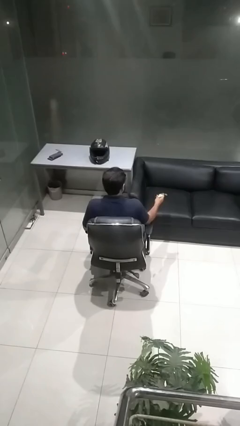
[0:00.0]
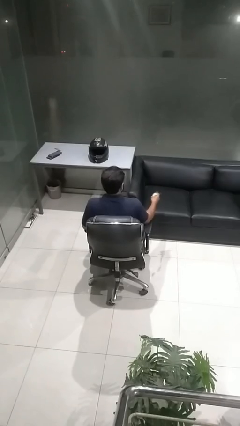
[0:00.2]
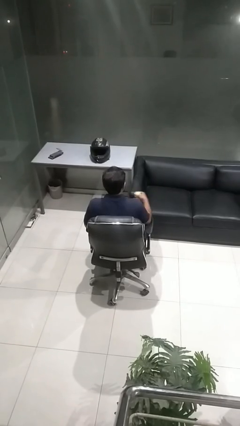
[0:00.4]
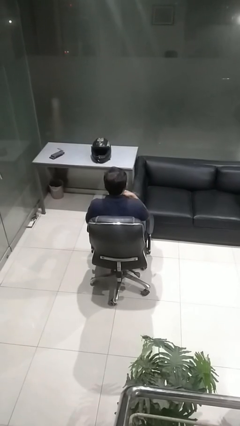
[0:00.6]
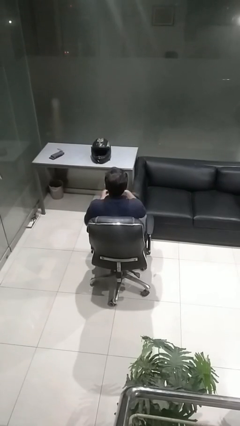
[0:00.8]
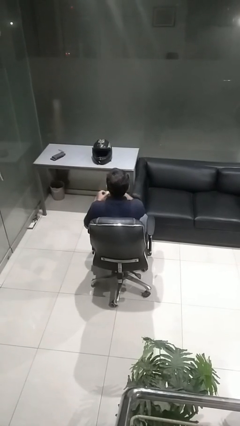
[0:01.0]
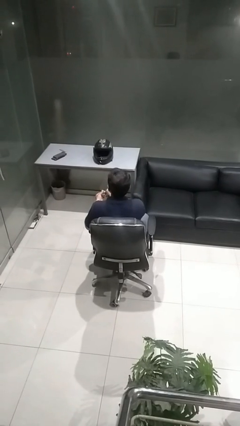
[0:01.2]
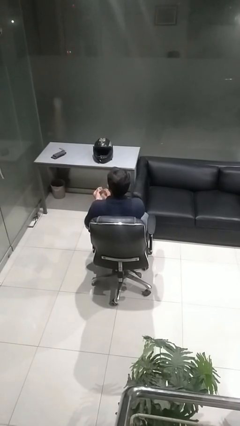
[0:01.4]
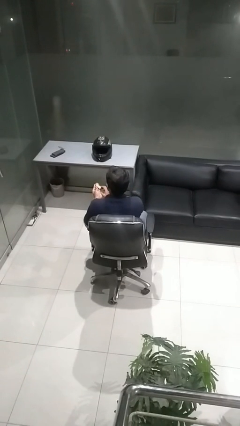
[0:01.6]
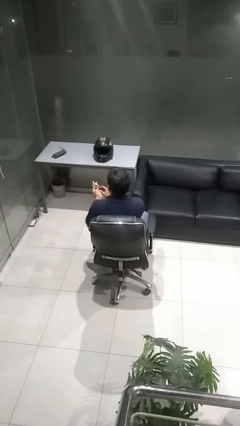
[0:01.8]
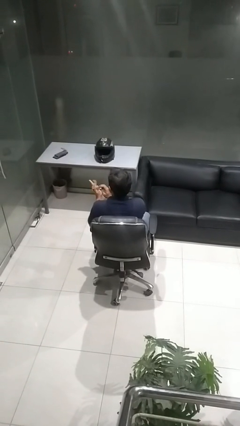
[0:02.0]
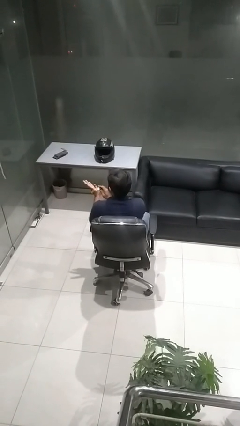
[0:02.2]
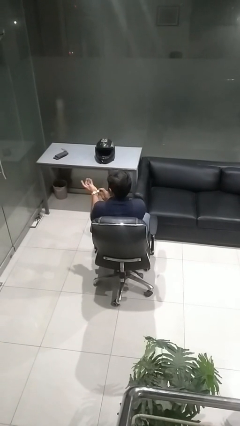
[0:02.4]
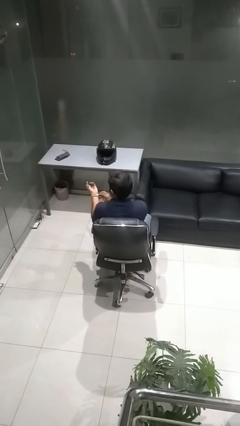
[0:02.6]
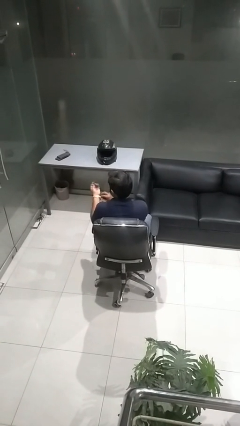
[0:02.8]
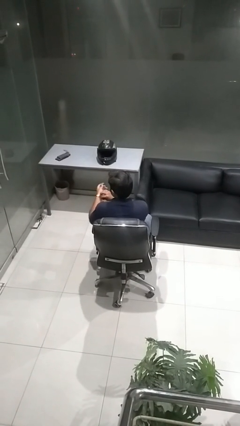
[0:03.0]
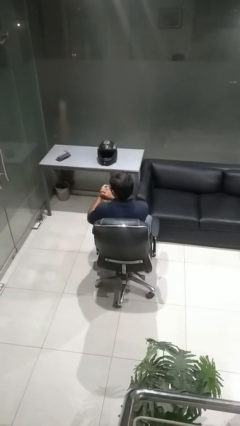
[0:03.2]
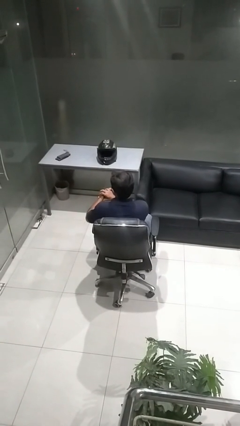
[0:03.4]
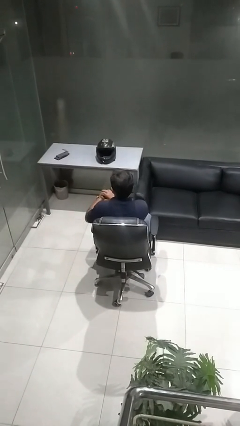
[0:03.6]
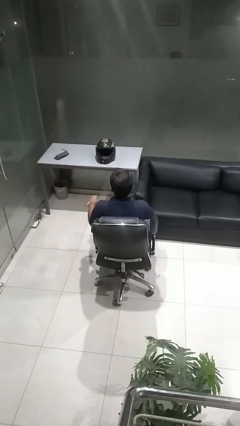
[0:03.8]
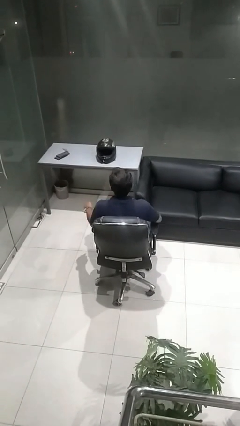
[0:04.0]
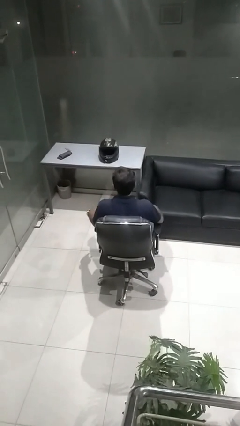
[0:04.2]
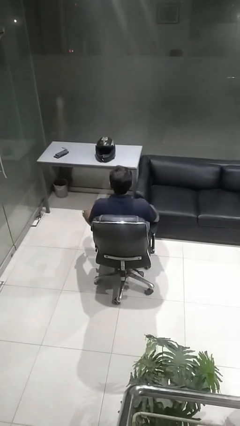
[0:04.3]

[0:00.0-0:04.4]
person puts on wristwatch

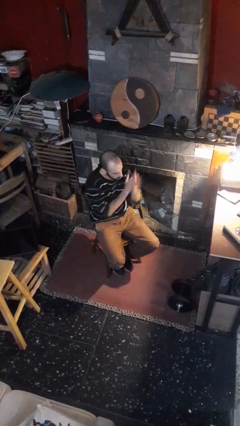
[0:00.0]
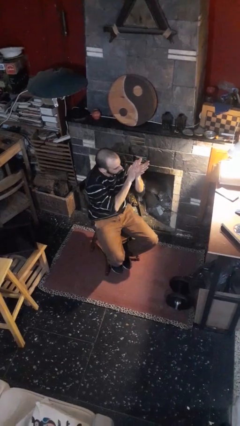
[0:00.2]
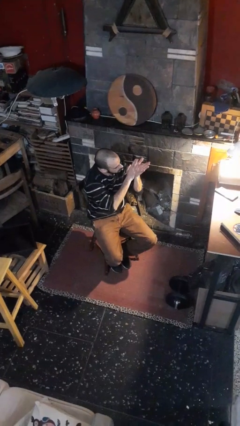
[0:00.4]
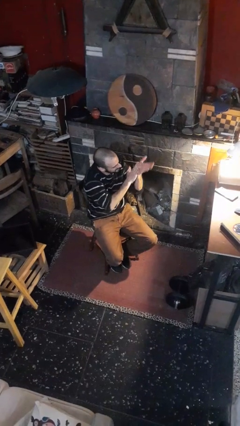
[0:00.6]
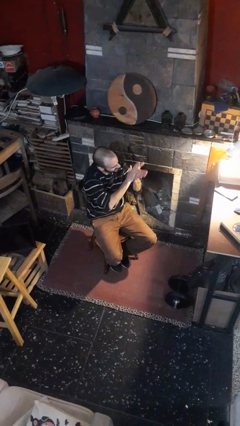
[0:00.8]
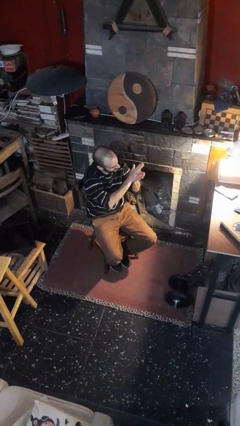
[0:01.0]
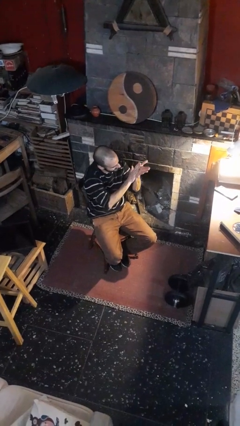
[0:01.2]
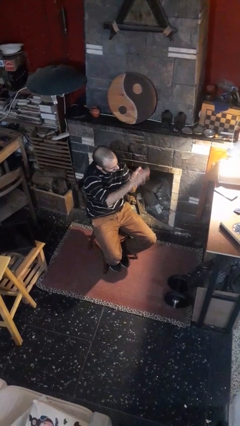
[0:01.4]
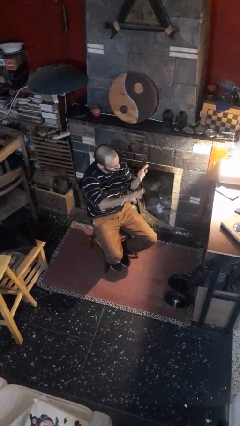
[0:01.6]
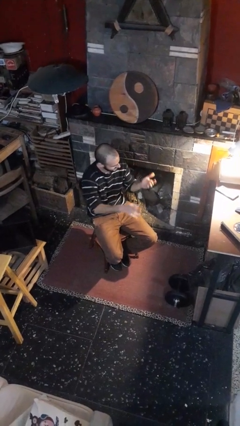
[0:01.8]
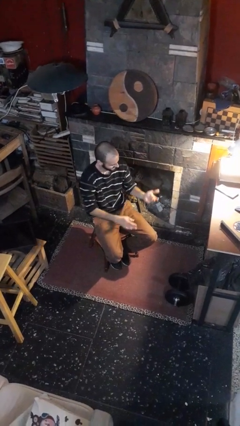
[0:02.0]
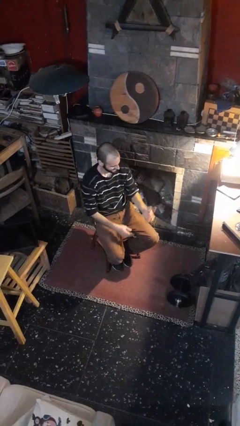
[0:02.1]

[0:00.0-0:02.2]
person swats bug

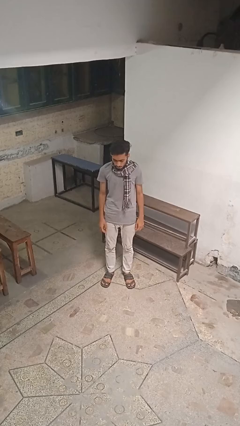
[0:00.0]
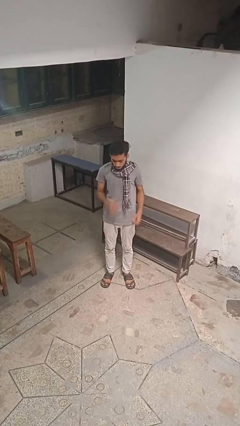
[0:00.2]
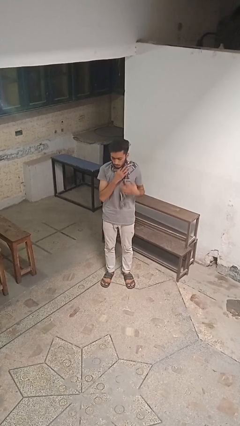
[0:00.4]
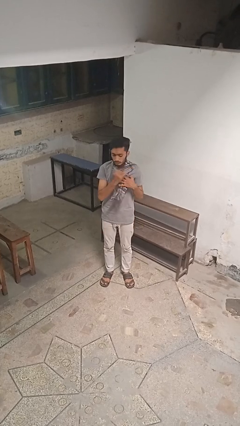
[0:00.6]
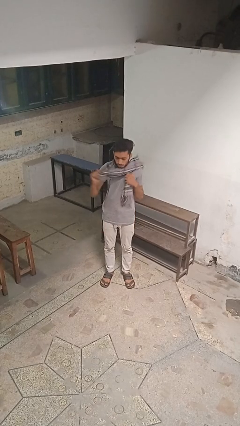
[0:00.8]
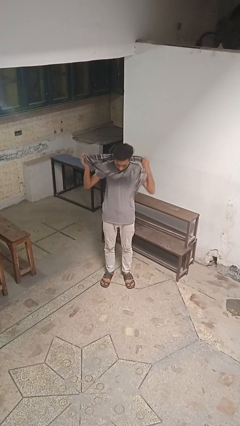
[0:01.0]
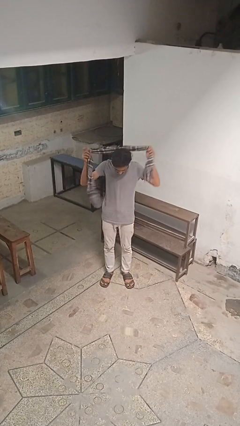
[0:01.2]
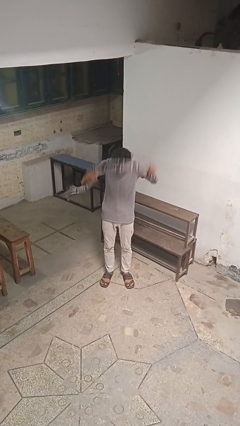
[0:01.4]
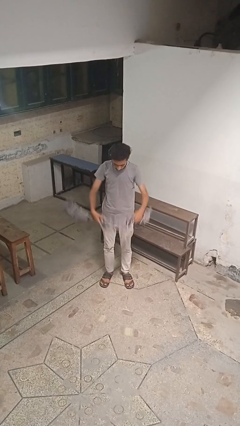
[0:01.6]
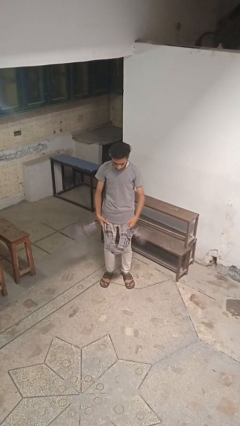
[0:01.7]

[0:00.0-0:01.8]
person takes off scarf

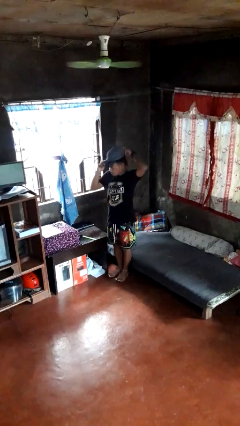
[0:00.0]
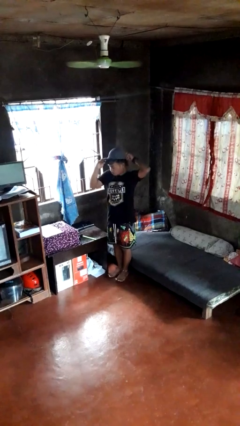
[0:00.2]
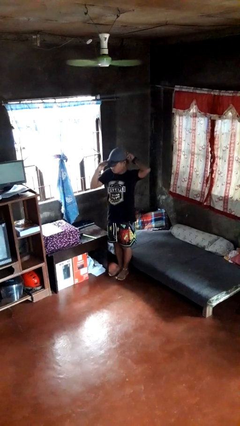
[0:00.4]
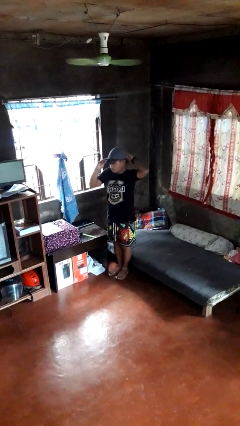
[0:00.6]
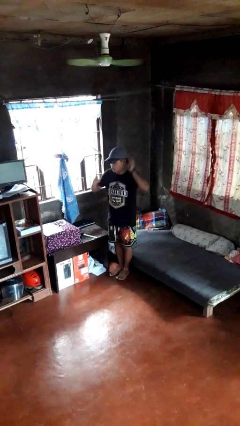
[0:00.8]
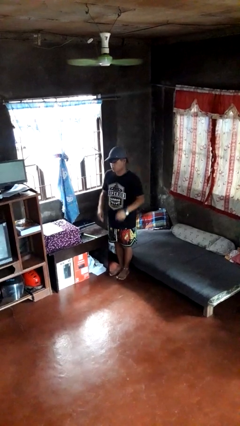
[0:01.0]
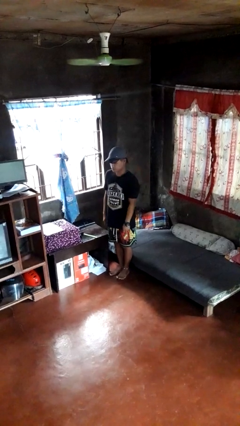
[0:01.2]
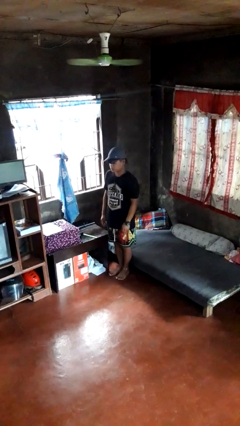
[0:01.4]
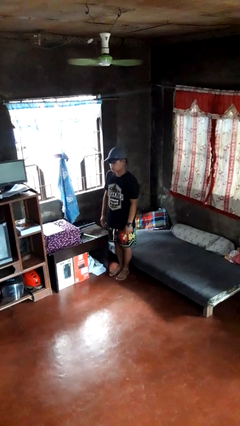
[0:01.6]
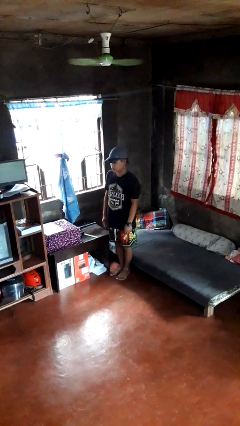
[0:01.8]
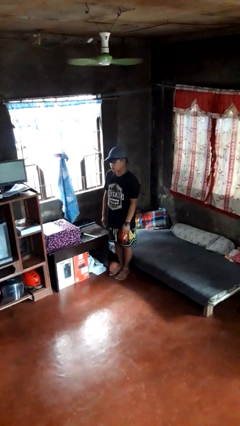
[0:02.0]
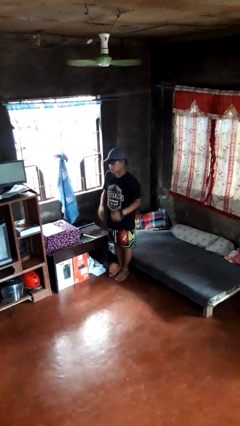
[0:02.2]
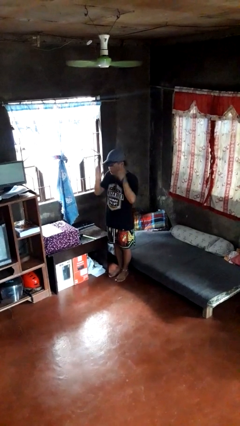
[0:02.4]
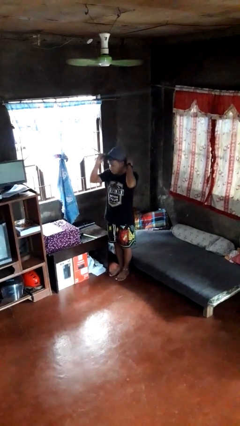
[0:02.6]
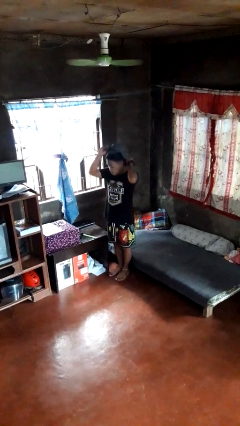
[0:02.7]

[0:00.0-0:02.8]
person puts on hat

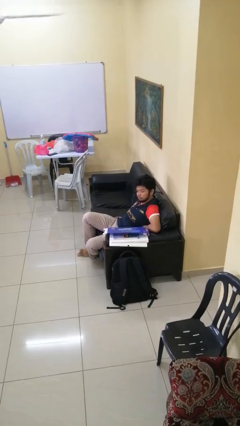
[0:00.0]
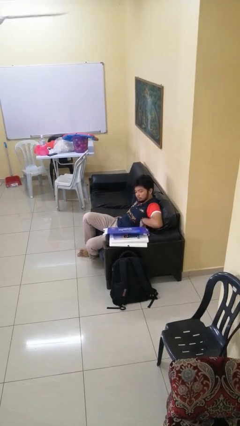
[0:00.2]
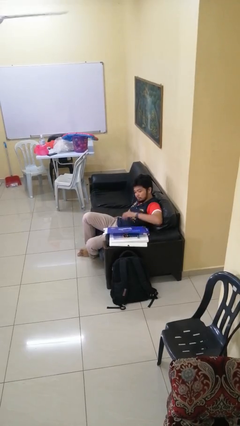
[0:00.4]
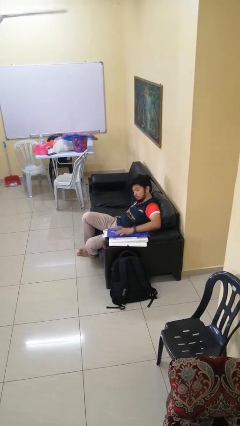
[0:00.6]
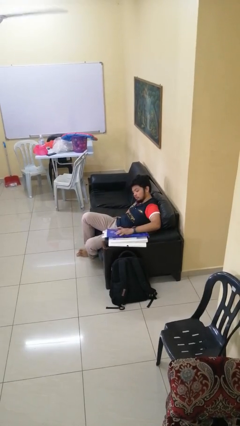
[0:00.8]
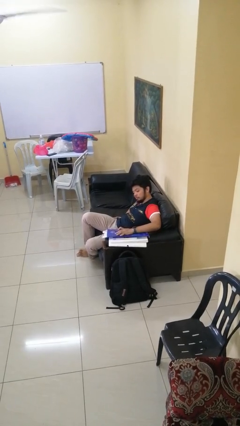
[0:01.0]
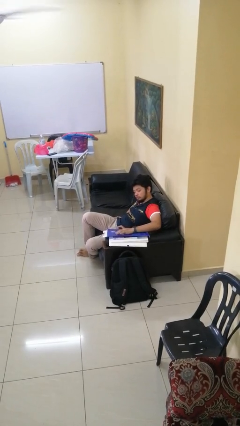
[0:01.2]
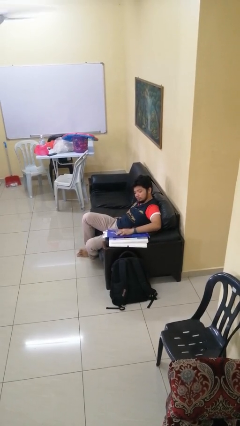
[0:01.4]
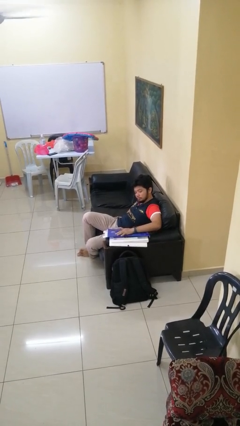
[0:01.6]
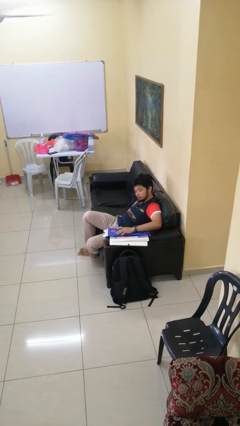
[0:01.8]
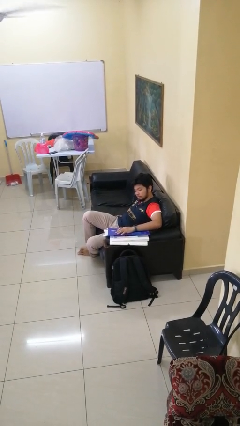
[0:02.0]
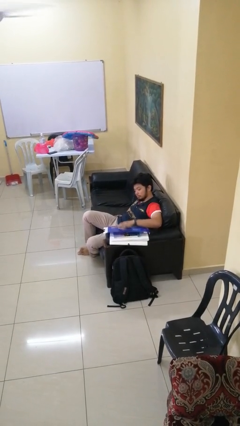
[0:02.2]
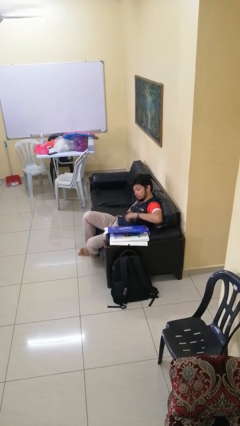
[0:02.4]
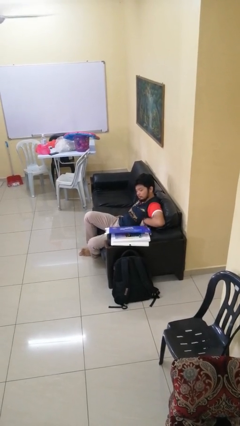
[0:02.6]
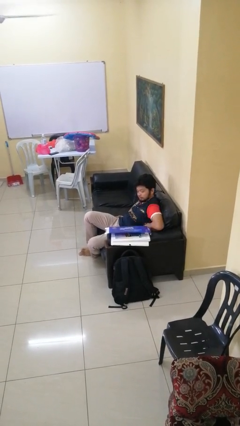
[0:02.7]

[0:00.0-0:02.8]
person taps object with finger

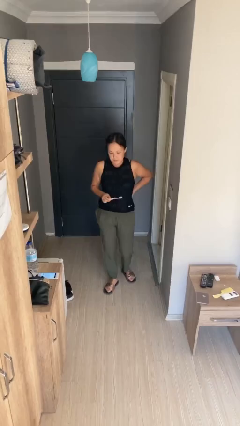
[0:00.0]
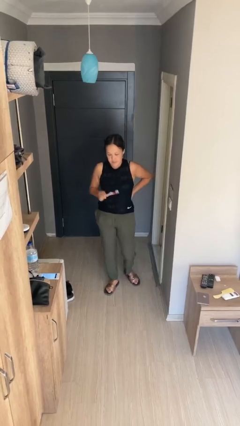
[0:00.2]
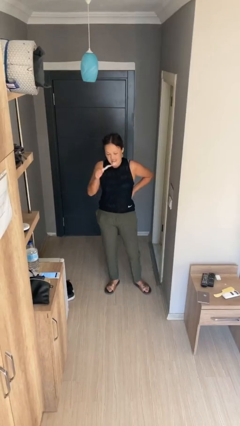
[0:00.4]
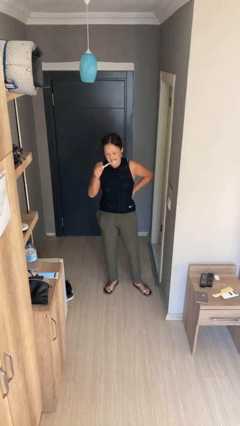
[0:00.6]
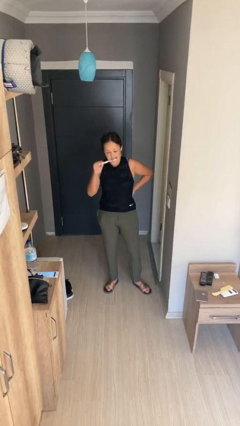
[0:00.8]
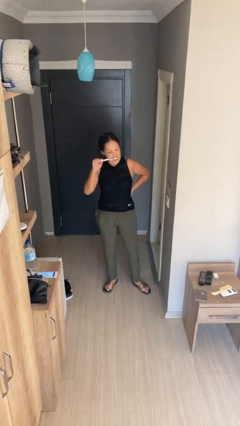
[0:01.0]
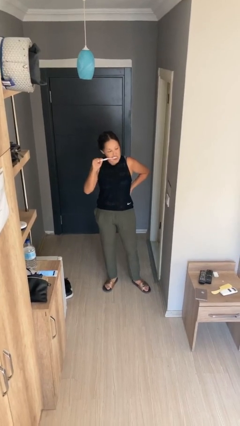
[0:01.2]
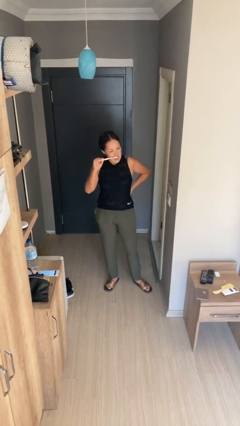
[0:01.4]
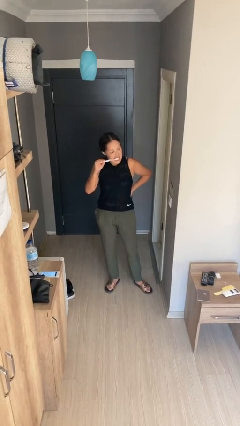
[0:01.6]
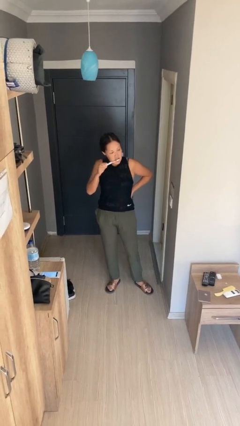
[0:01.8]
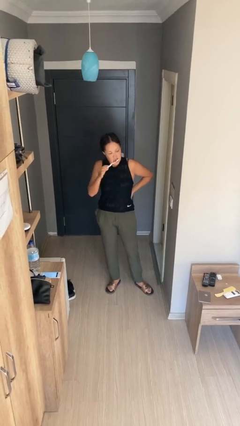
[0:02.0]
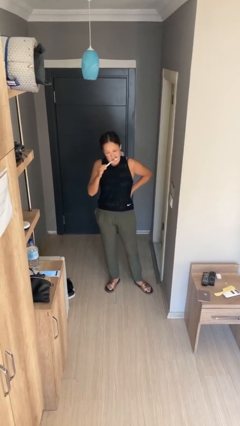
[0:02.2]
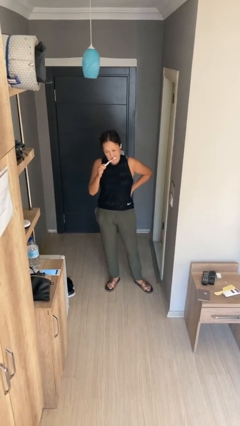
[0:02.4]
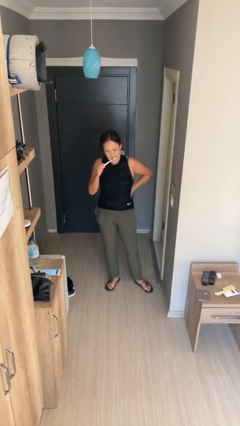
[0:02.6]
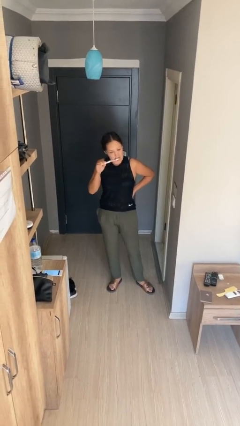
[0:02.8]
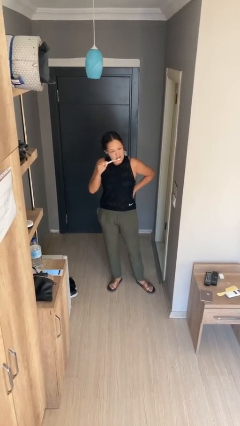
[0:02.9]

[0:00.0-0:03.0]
person brushes teeth

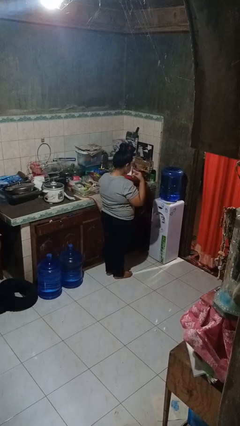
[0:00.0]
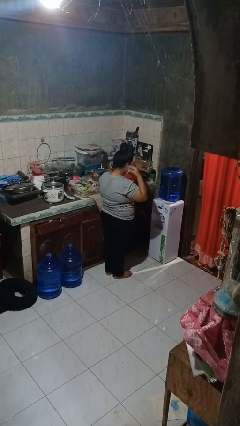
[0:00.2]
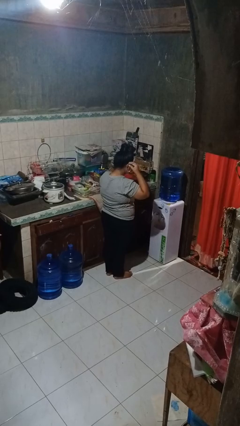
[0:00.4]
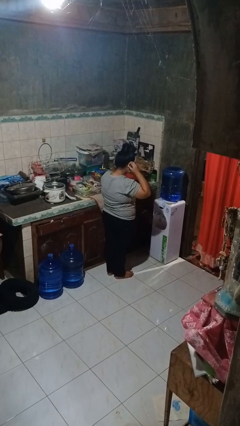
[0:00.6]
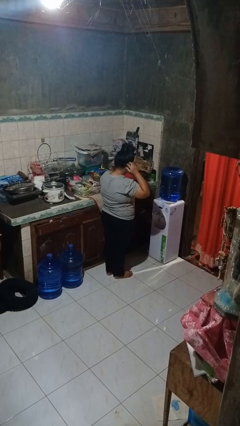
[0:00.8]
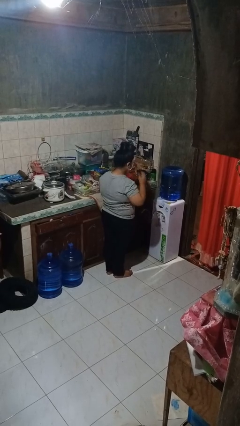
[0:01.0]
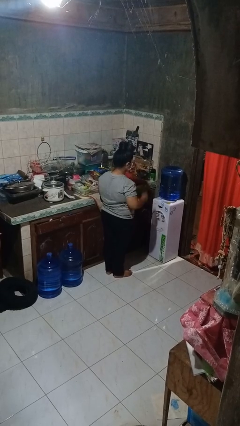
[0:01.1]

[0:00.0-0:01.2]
person puts on facemask
